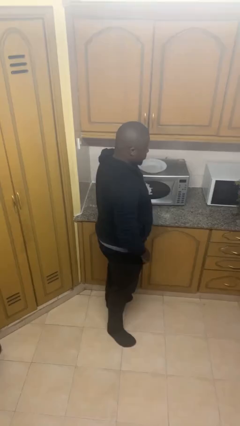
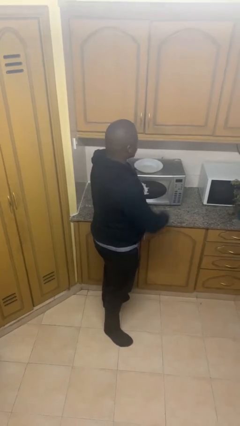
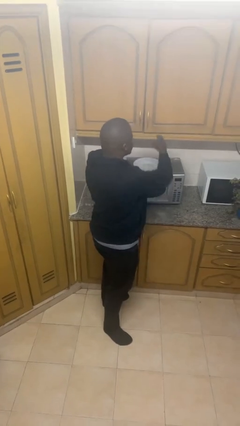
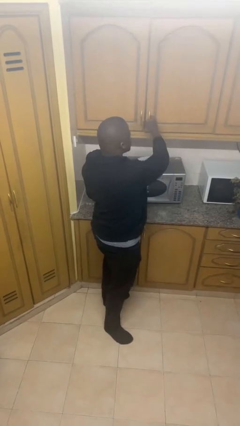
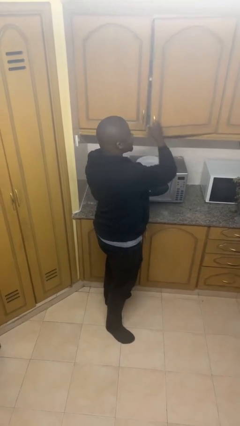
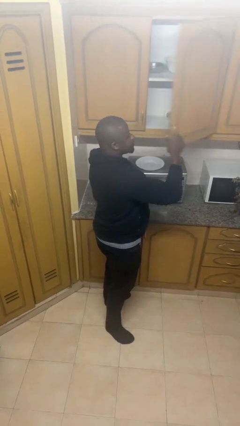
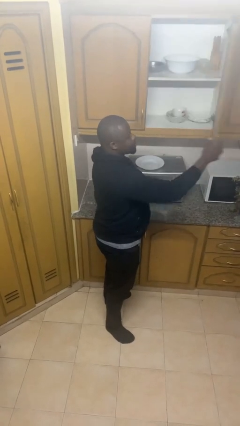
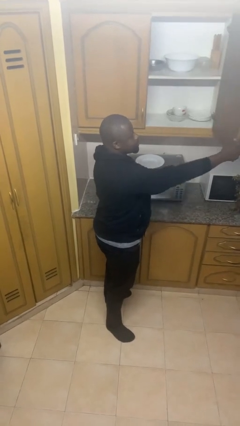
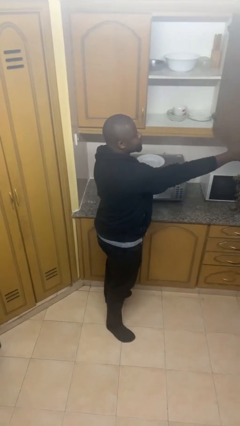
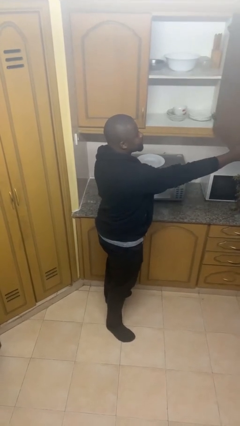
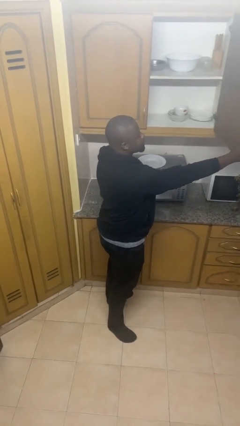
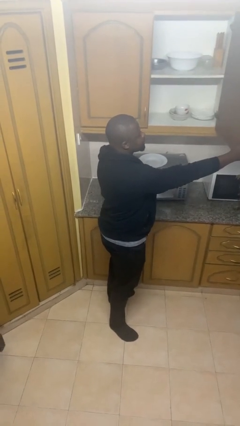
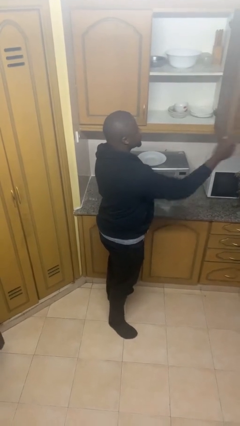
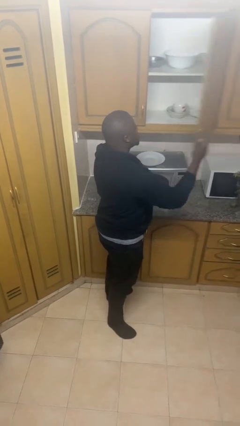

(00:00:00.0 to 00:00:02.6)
person opens cabinet

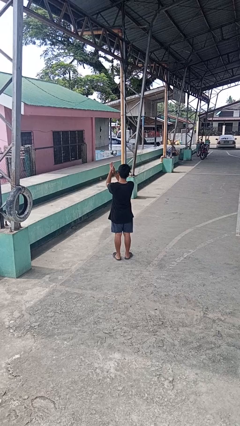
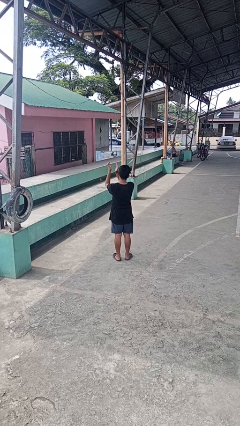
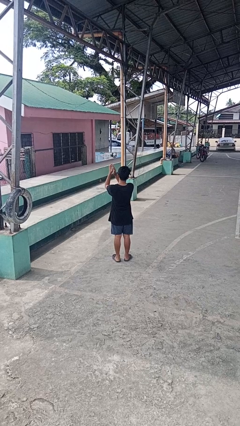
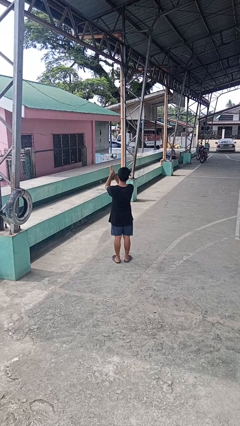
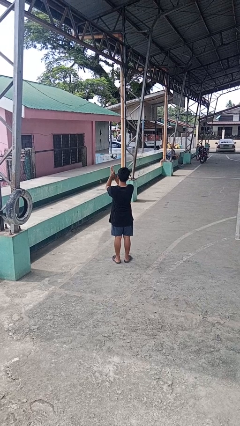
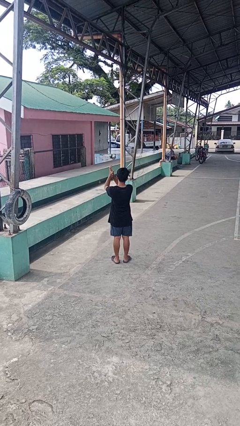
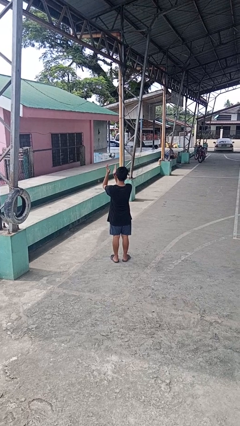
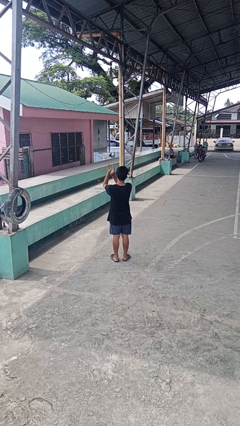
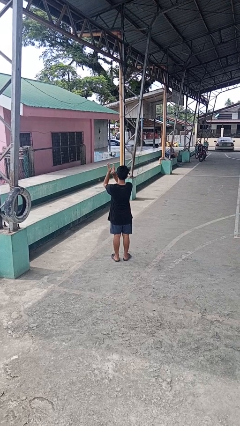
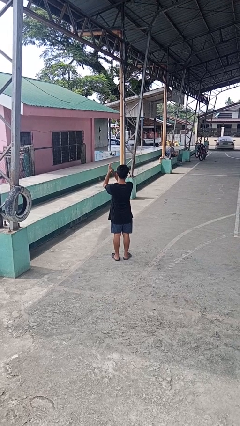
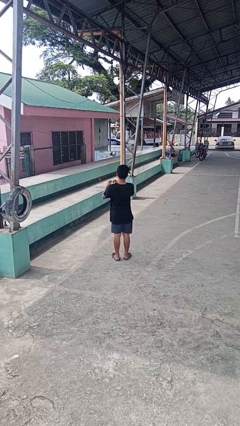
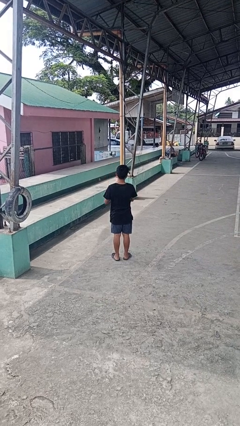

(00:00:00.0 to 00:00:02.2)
person claps hands

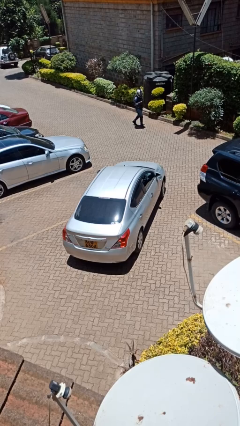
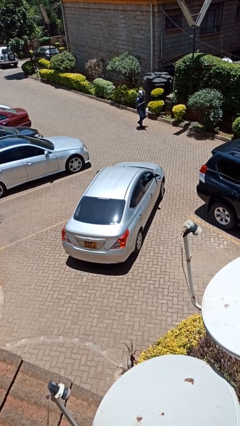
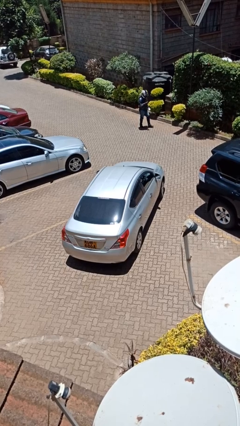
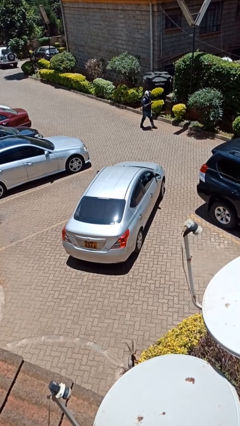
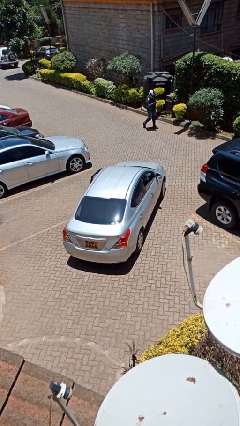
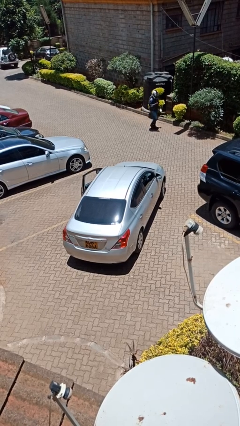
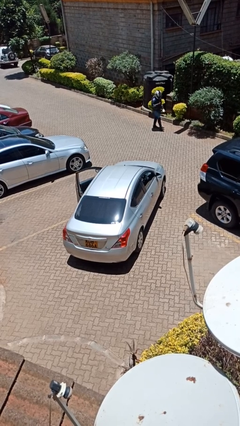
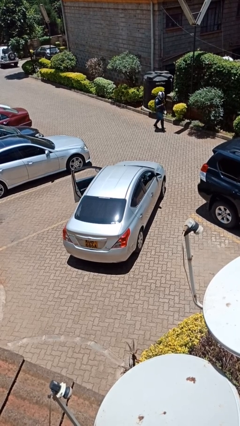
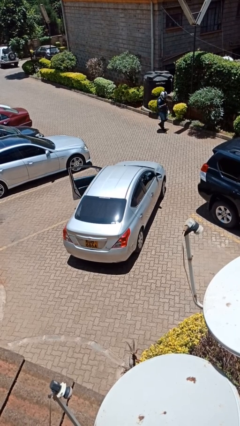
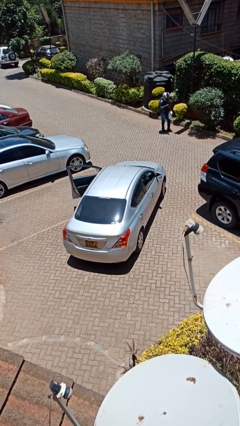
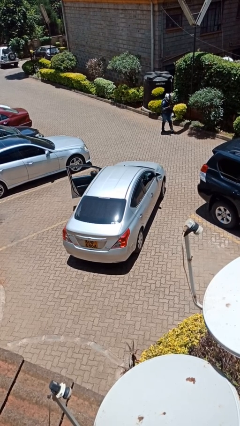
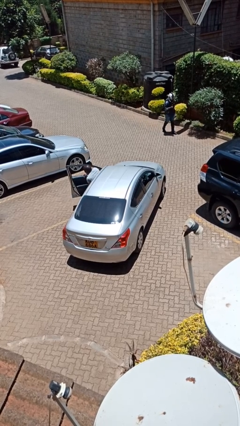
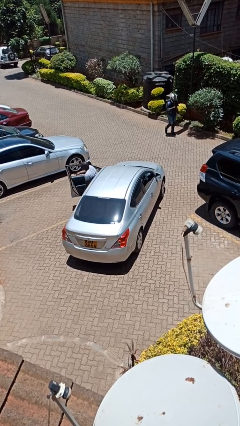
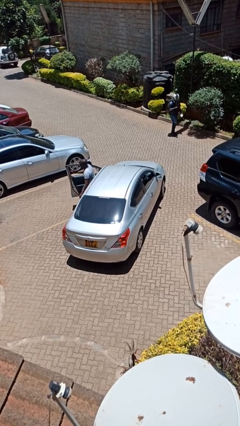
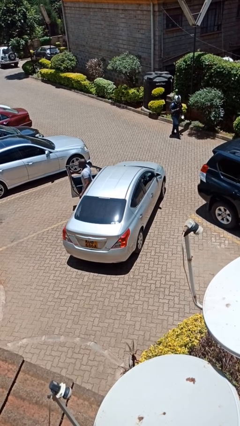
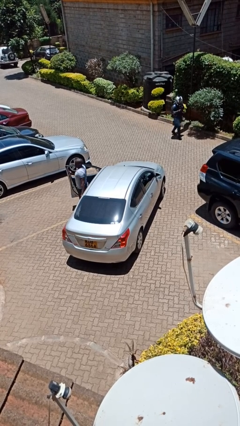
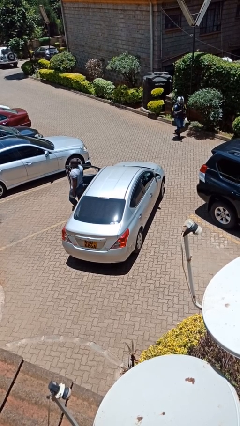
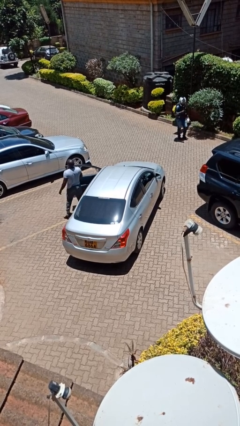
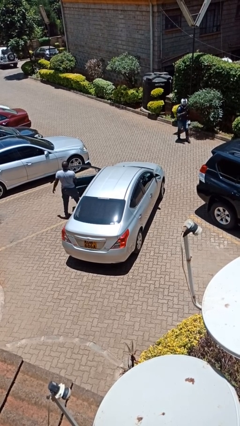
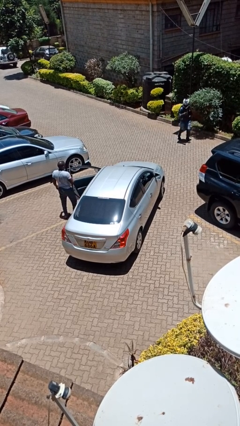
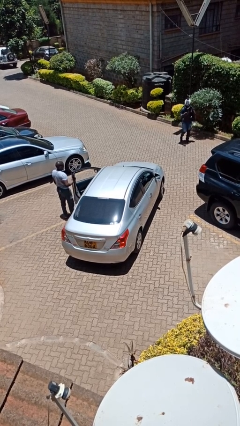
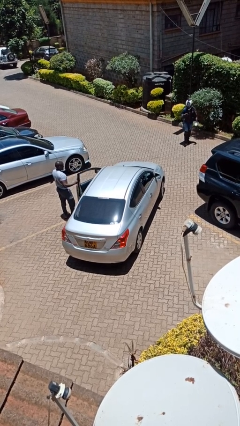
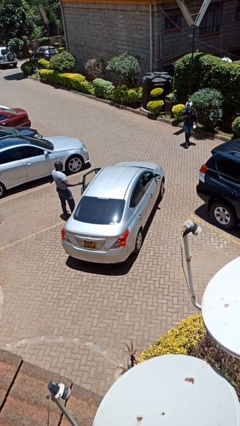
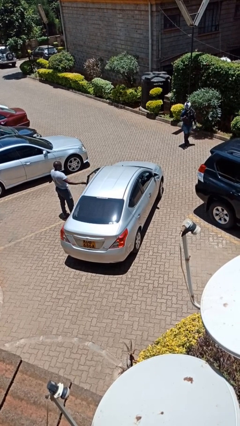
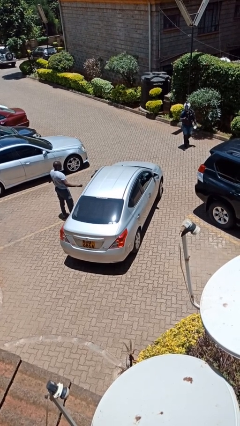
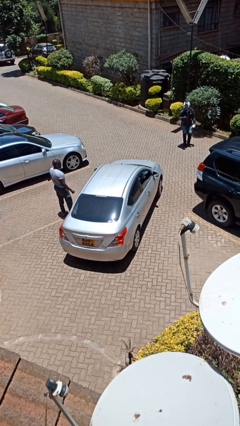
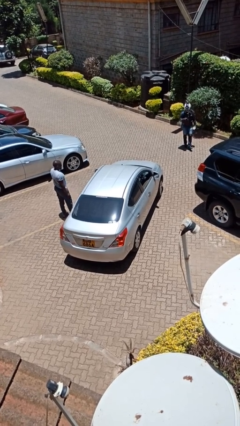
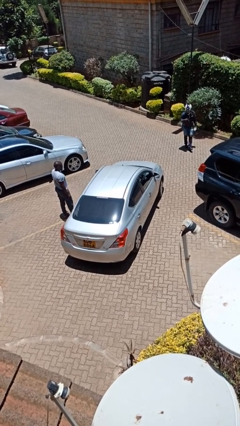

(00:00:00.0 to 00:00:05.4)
car drops off person

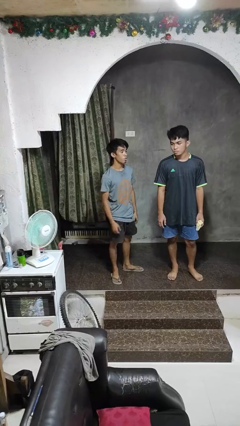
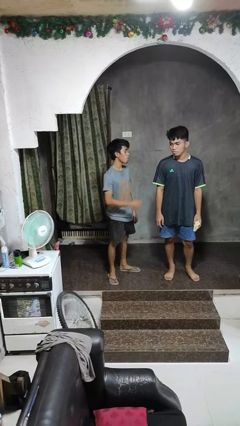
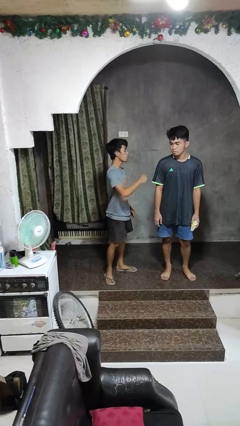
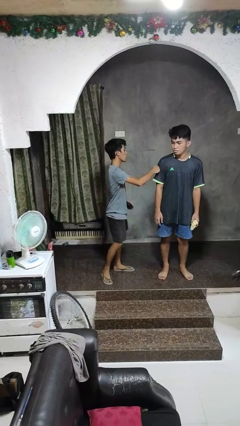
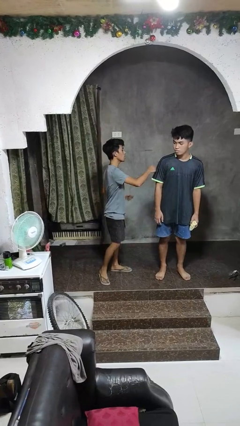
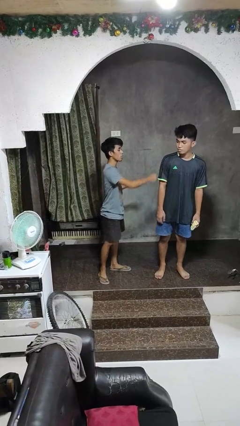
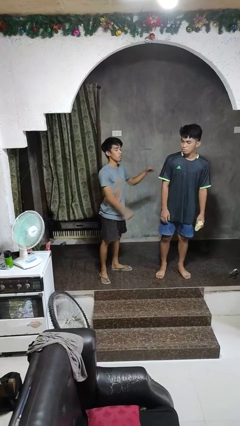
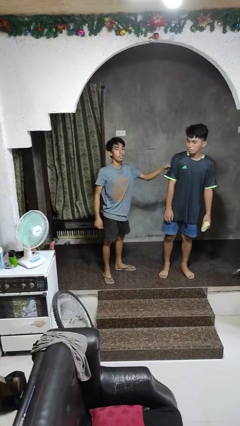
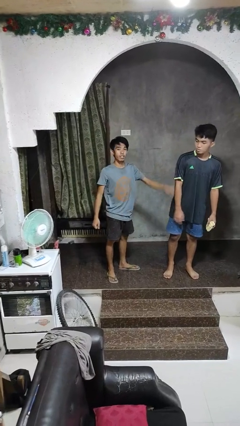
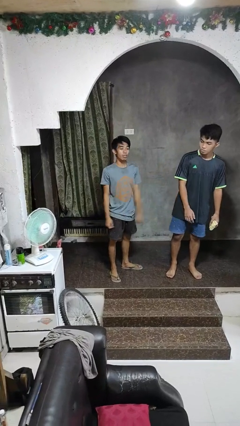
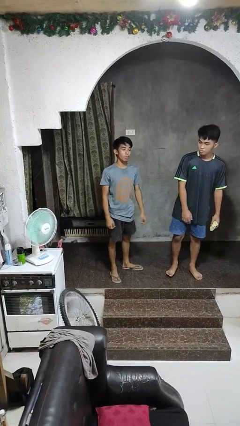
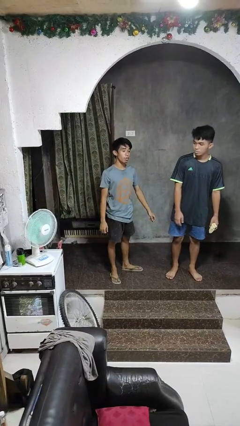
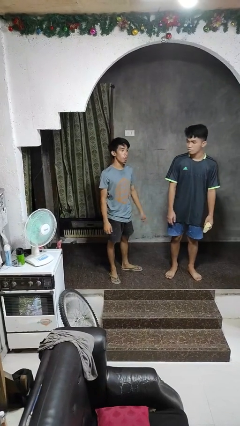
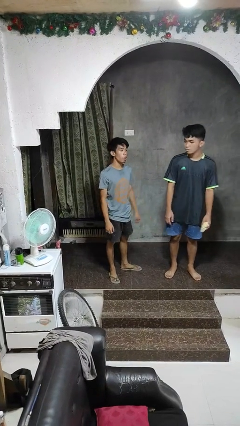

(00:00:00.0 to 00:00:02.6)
person pounds shoulders of person

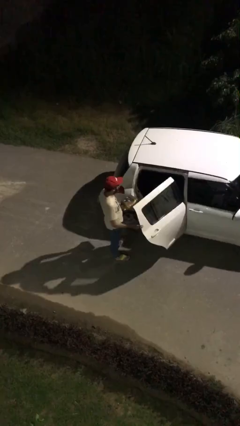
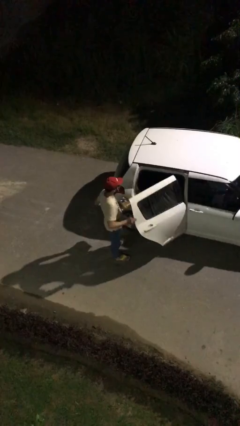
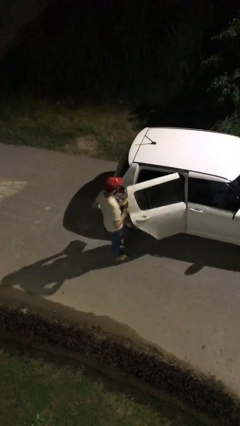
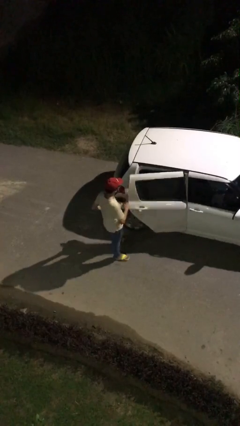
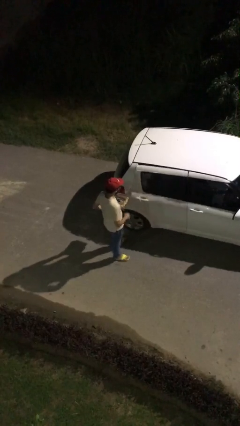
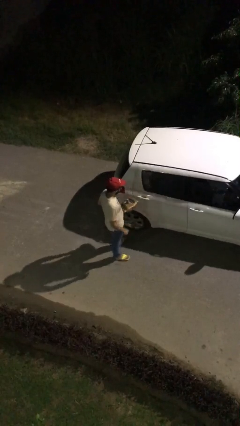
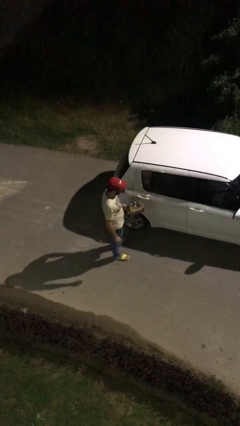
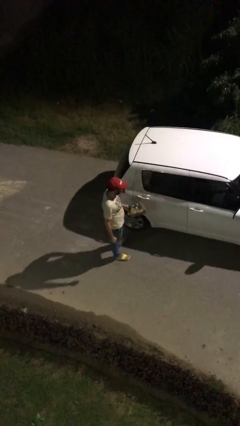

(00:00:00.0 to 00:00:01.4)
person closes car door

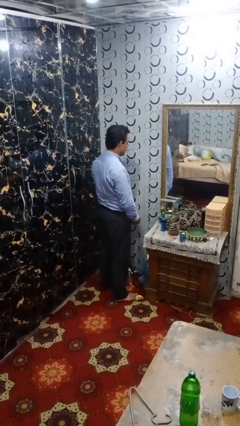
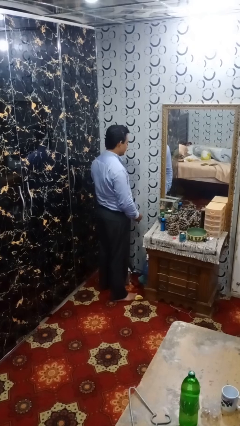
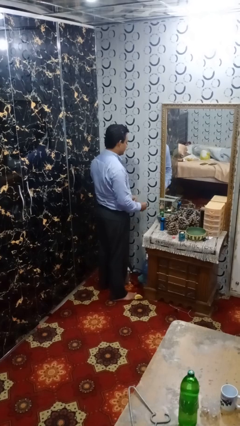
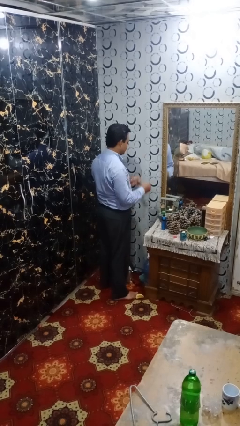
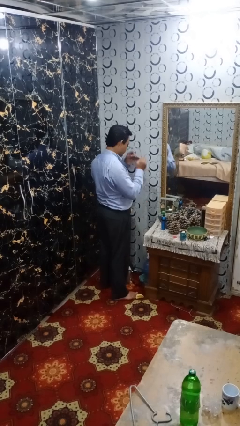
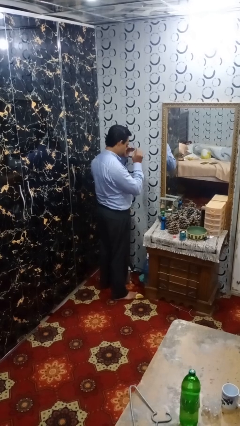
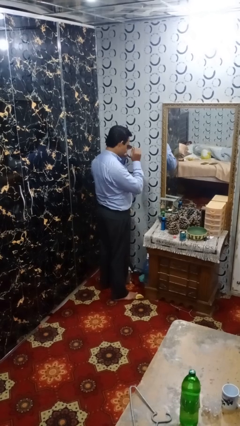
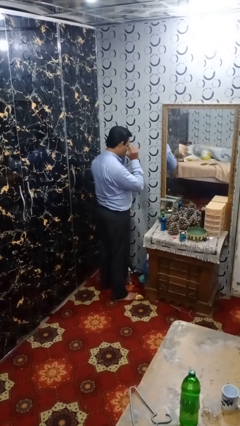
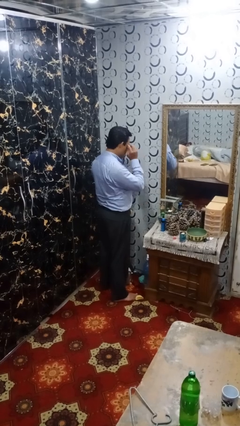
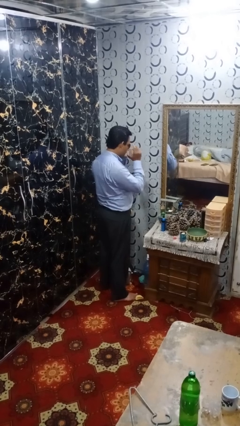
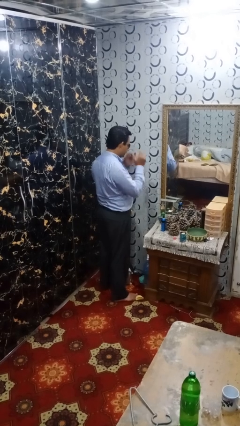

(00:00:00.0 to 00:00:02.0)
person puts on sunglasses

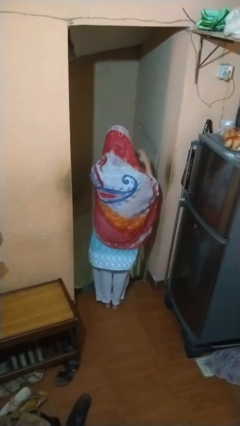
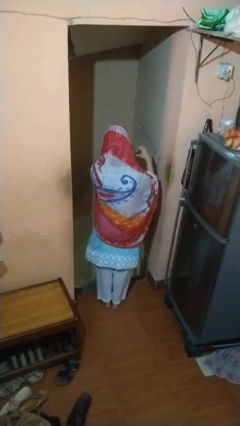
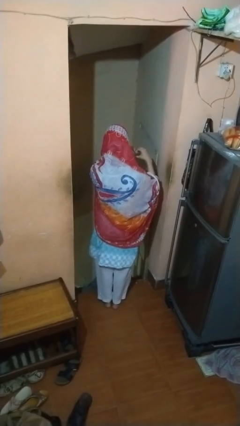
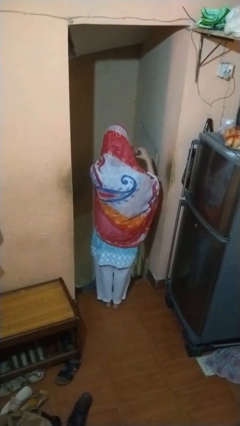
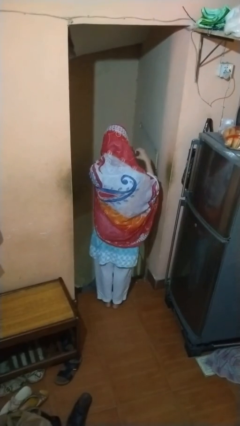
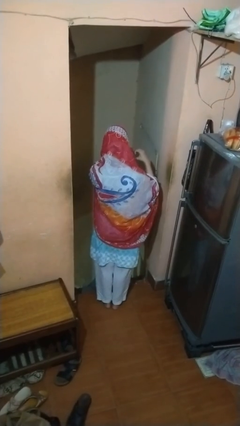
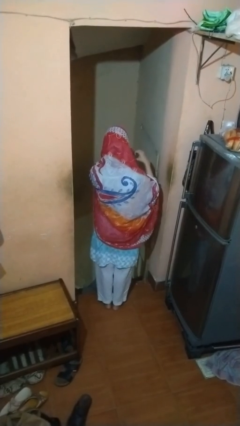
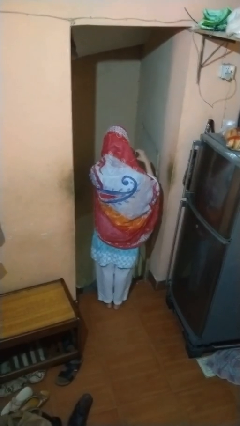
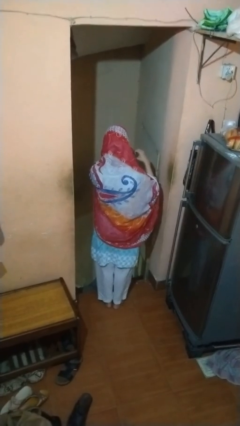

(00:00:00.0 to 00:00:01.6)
person gestures heart
